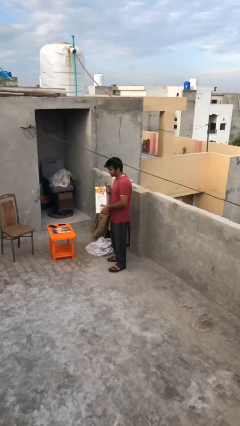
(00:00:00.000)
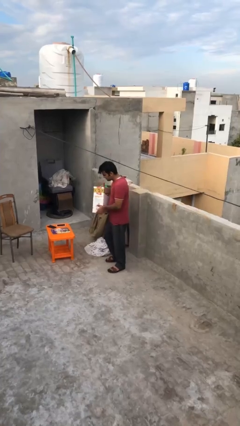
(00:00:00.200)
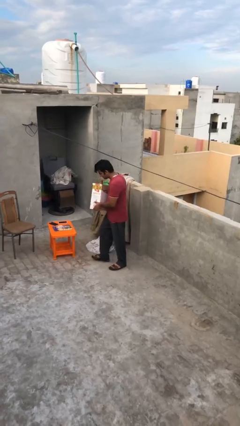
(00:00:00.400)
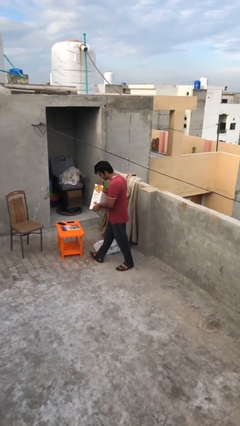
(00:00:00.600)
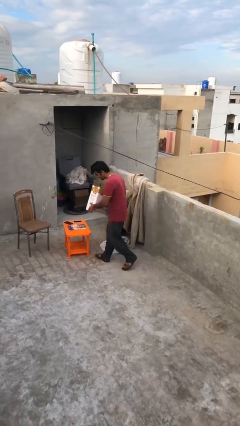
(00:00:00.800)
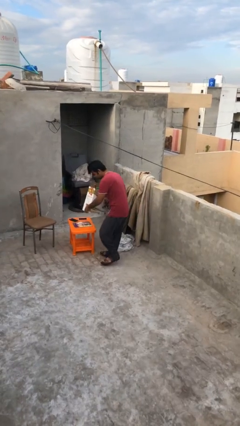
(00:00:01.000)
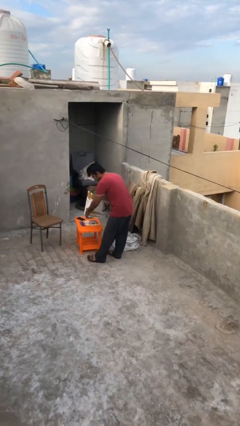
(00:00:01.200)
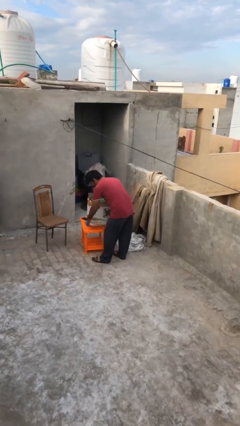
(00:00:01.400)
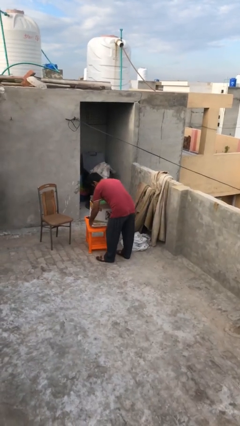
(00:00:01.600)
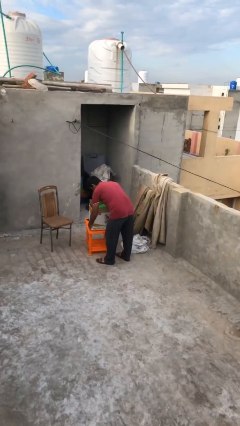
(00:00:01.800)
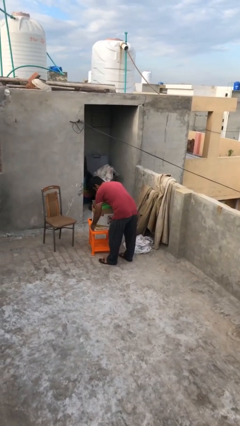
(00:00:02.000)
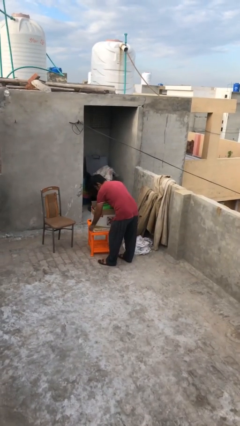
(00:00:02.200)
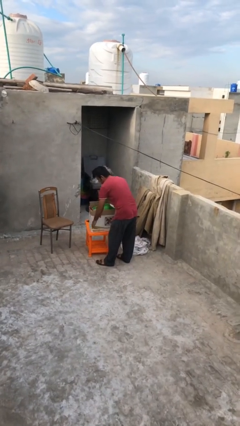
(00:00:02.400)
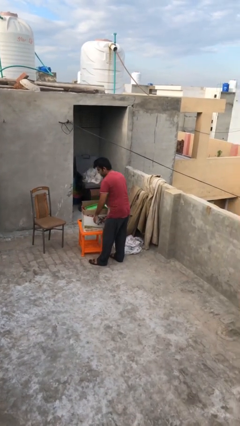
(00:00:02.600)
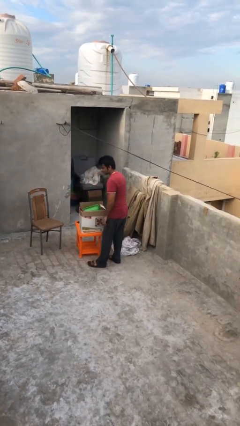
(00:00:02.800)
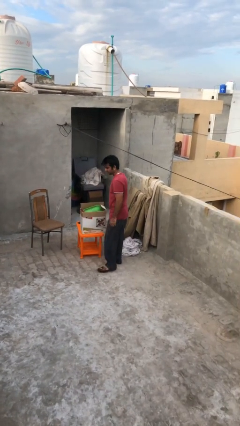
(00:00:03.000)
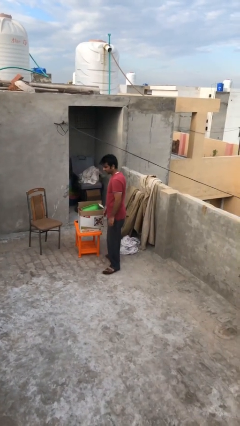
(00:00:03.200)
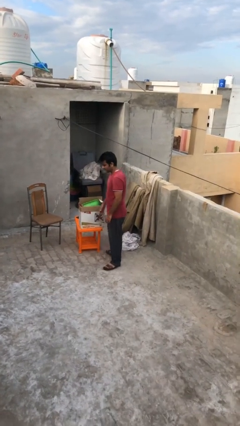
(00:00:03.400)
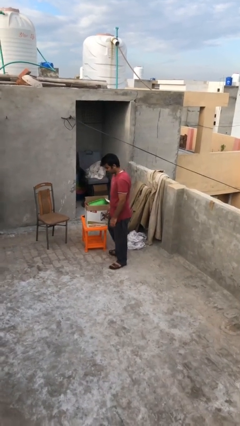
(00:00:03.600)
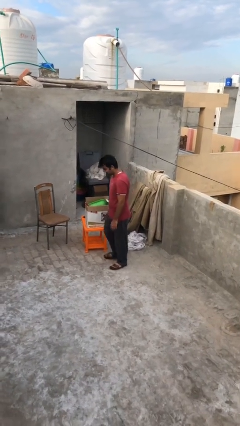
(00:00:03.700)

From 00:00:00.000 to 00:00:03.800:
person puts down object on table

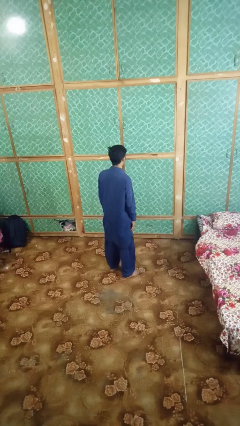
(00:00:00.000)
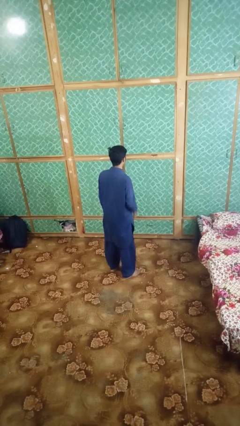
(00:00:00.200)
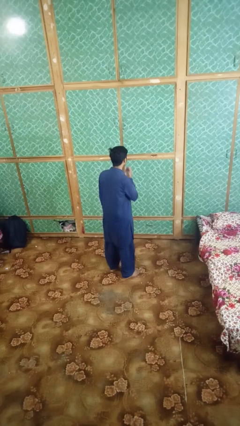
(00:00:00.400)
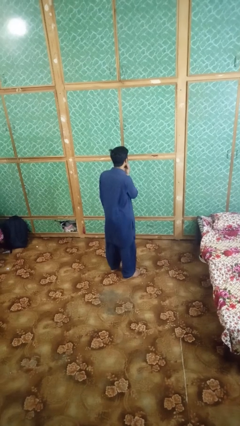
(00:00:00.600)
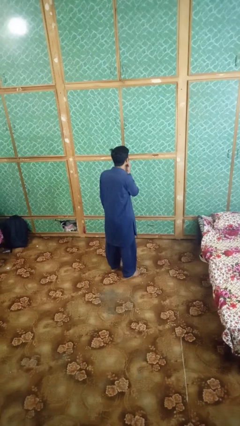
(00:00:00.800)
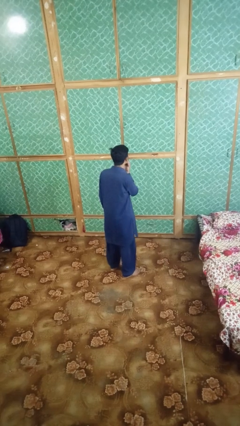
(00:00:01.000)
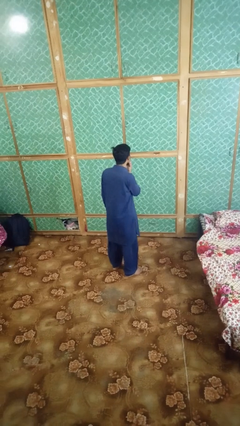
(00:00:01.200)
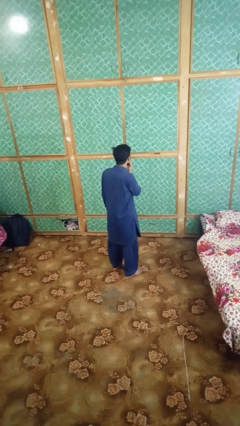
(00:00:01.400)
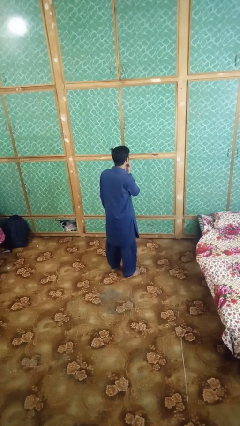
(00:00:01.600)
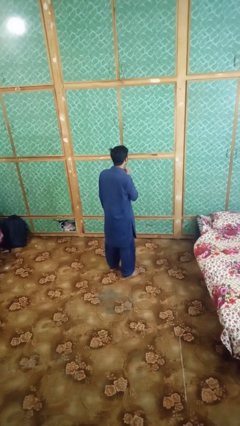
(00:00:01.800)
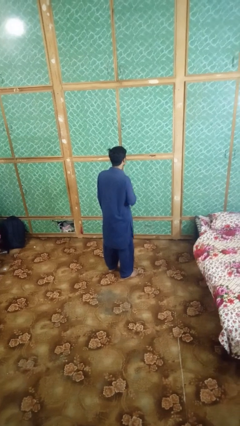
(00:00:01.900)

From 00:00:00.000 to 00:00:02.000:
person strokes chin

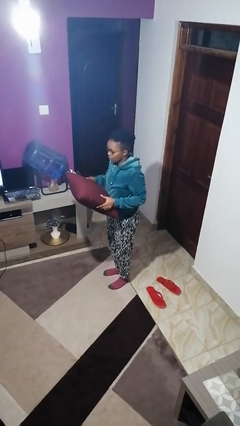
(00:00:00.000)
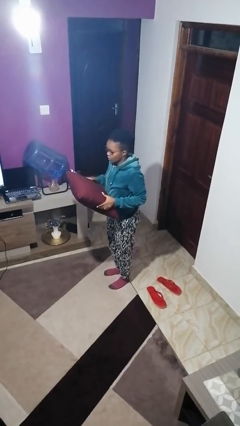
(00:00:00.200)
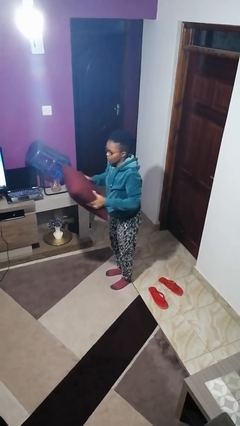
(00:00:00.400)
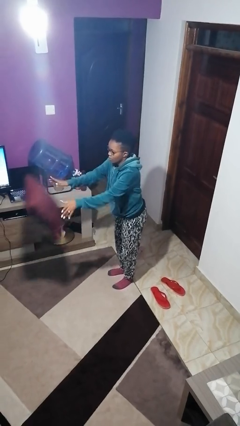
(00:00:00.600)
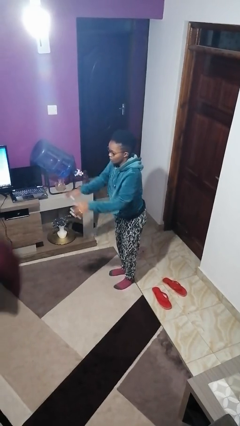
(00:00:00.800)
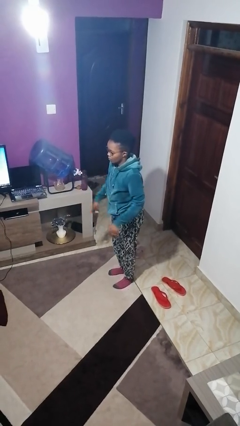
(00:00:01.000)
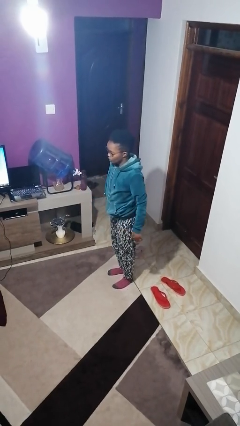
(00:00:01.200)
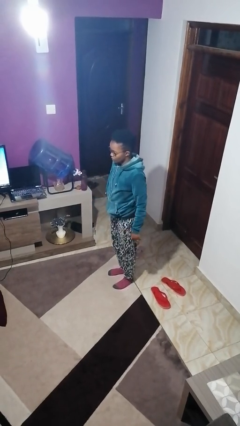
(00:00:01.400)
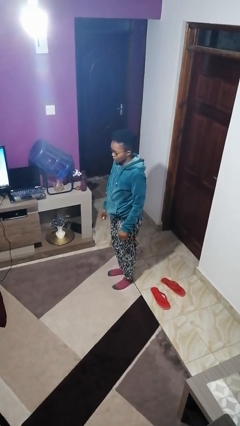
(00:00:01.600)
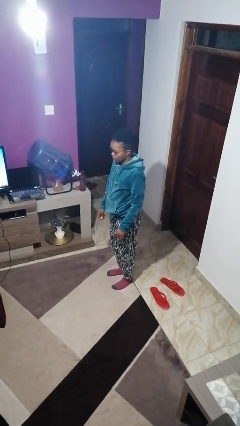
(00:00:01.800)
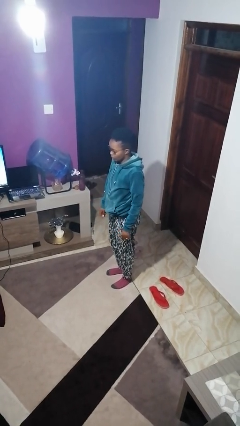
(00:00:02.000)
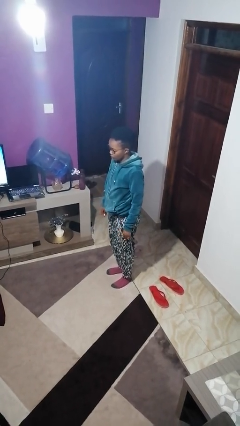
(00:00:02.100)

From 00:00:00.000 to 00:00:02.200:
person throws object to ground

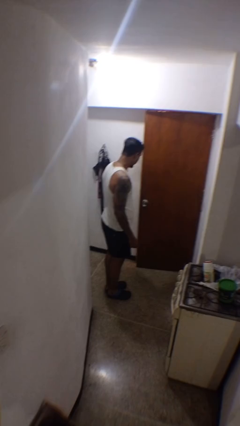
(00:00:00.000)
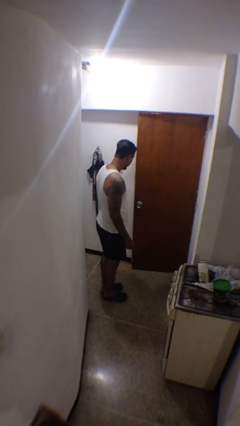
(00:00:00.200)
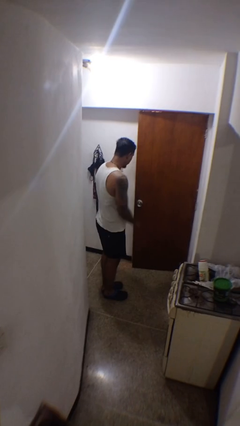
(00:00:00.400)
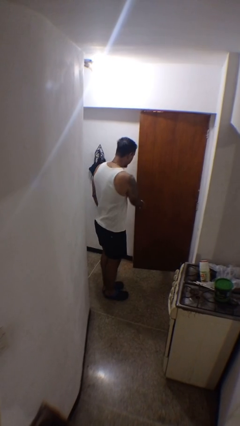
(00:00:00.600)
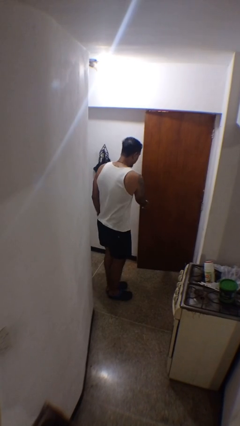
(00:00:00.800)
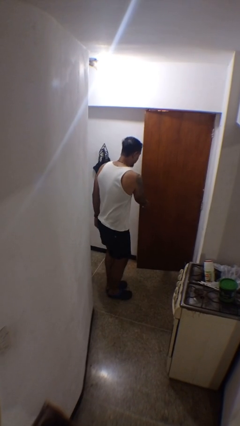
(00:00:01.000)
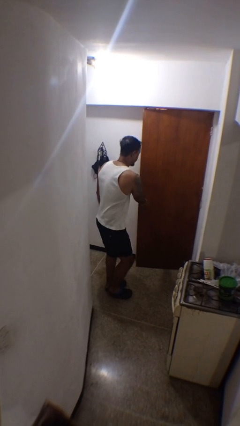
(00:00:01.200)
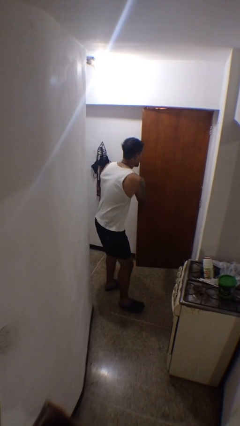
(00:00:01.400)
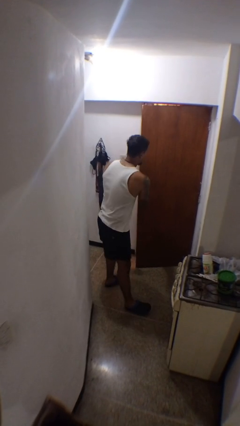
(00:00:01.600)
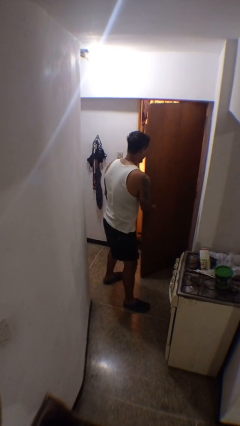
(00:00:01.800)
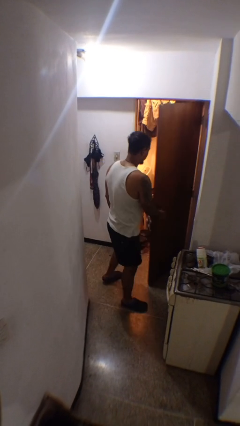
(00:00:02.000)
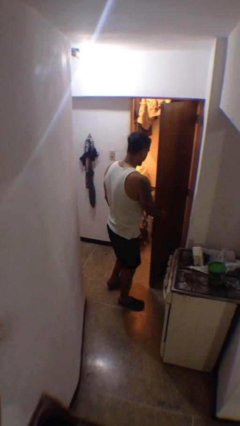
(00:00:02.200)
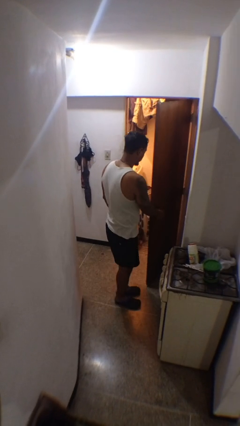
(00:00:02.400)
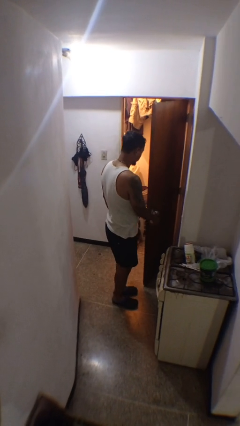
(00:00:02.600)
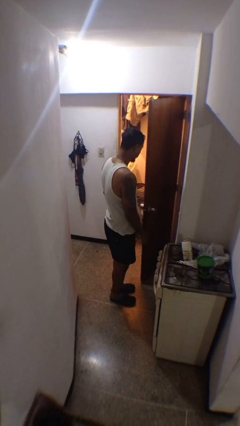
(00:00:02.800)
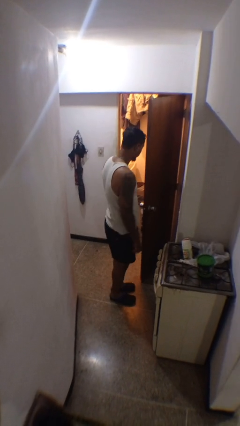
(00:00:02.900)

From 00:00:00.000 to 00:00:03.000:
person opens facility door

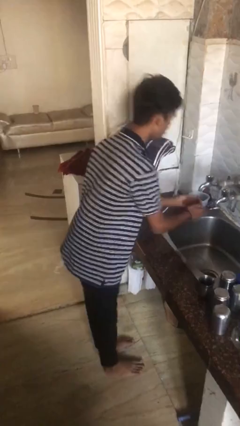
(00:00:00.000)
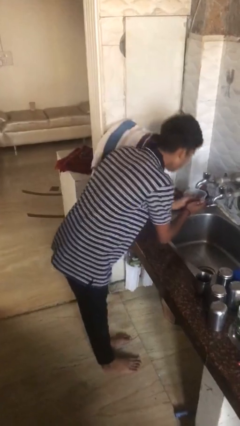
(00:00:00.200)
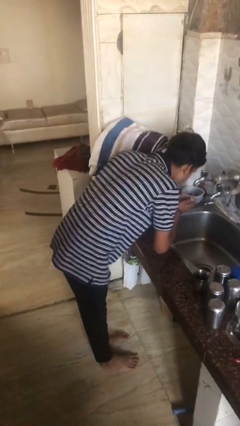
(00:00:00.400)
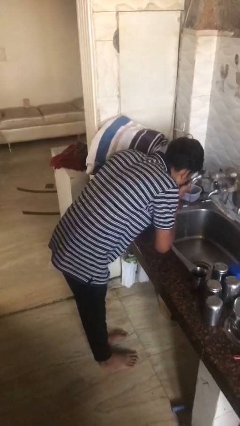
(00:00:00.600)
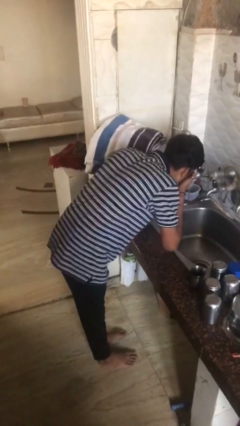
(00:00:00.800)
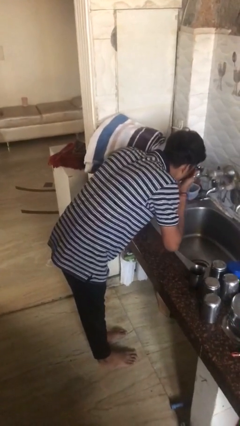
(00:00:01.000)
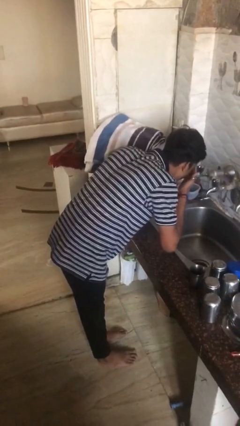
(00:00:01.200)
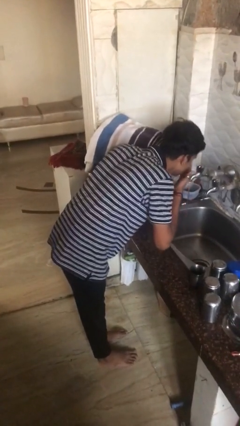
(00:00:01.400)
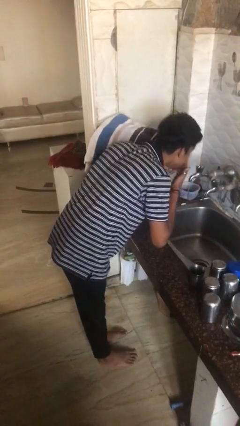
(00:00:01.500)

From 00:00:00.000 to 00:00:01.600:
person washes face

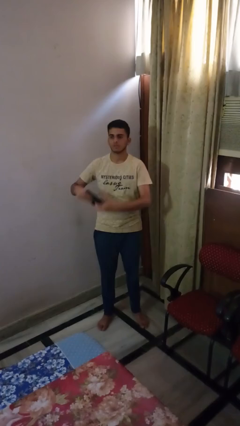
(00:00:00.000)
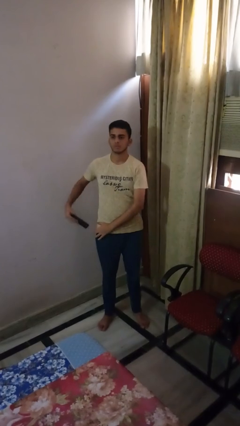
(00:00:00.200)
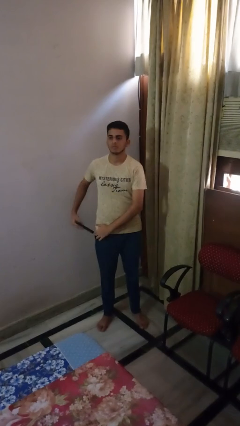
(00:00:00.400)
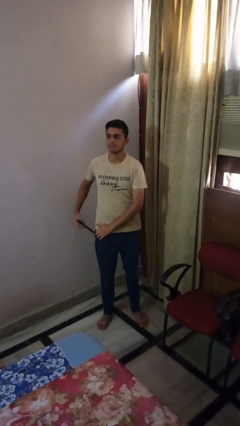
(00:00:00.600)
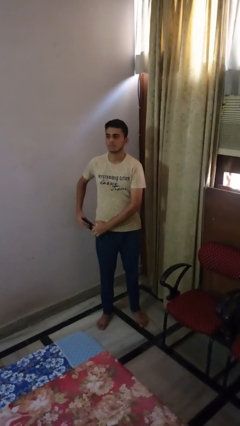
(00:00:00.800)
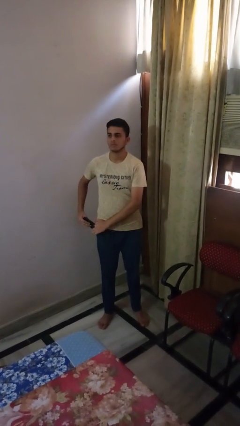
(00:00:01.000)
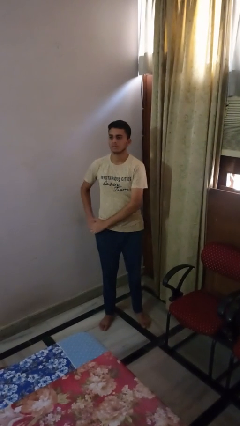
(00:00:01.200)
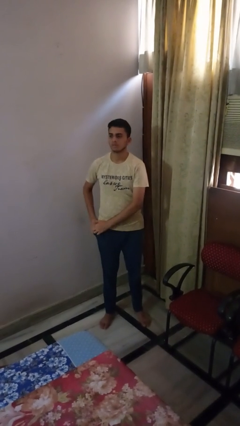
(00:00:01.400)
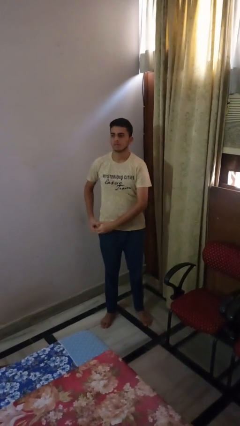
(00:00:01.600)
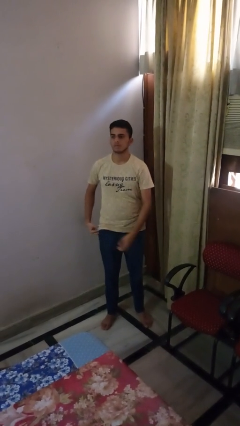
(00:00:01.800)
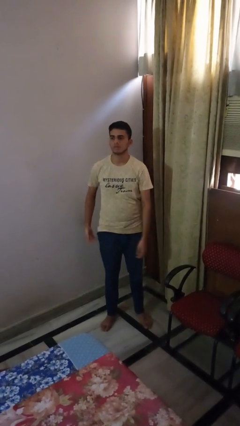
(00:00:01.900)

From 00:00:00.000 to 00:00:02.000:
person puts phone into pocket

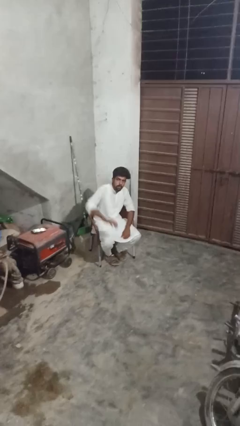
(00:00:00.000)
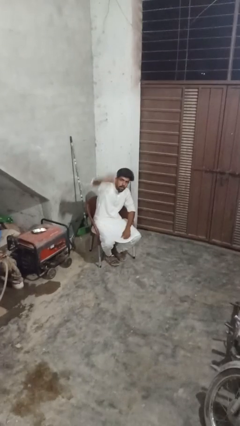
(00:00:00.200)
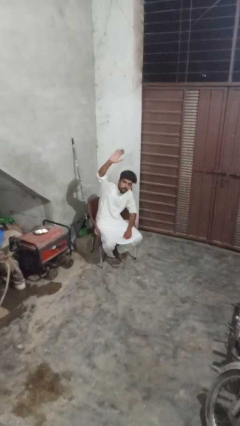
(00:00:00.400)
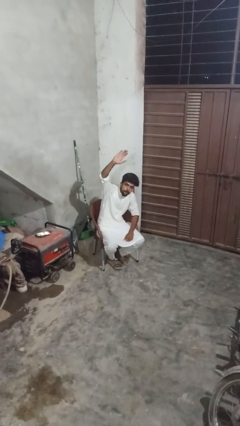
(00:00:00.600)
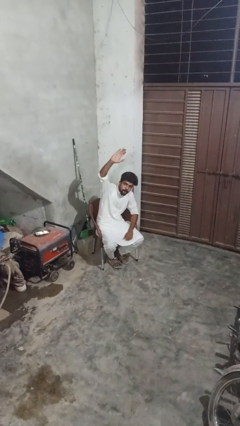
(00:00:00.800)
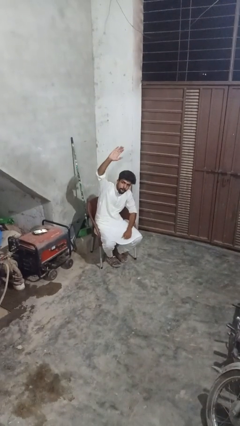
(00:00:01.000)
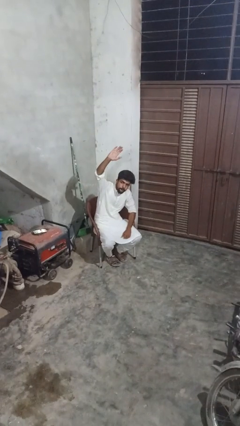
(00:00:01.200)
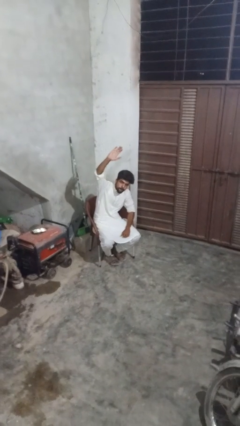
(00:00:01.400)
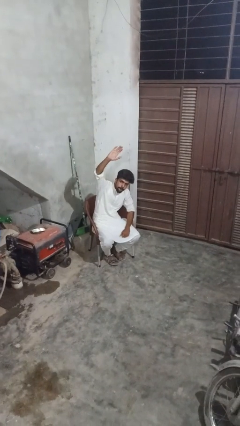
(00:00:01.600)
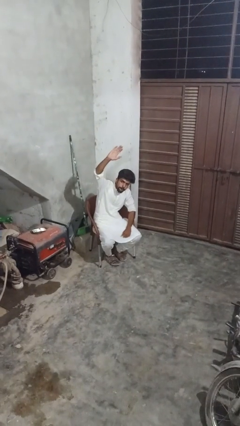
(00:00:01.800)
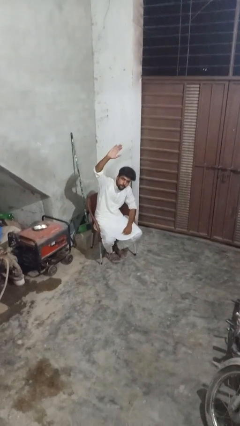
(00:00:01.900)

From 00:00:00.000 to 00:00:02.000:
person gestures raise hand

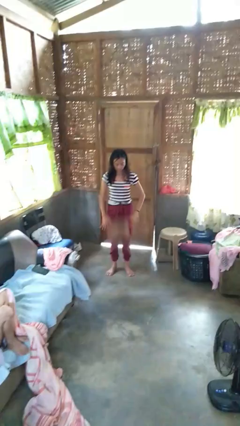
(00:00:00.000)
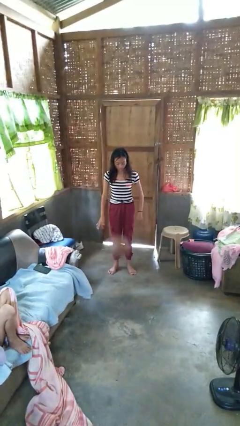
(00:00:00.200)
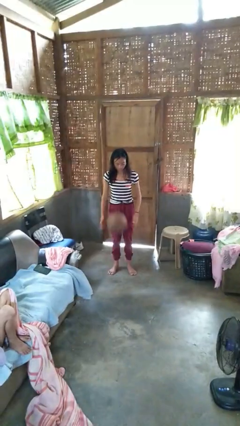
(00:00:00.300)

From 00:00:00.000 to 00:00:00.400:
person bounces ball on floor
